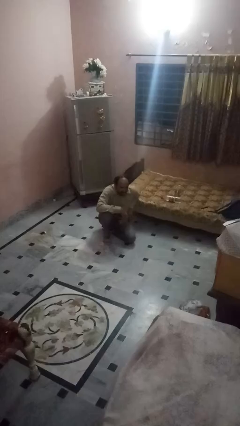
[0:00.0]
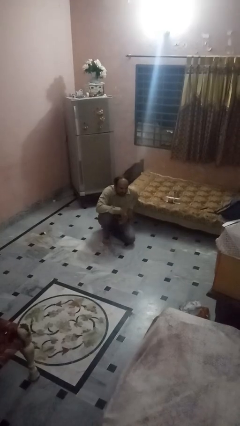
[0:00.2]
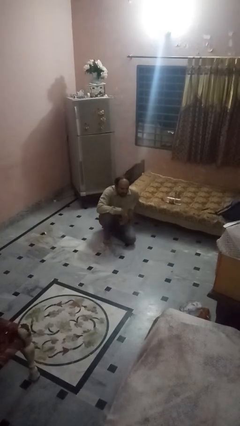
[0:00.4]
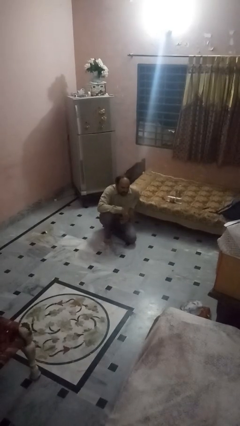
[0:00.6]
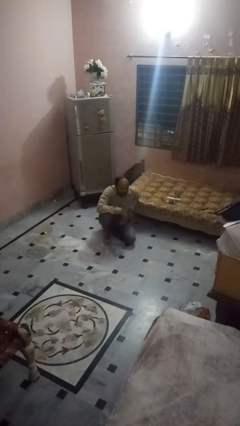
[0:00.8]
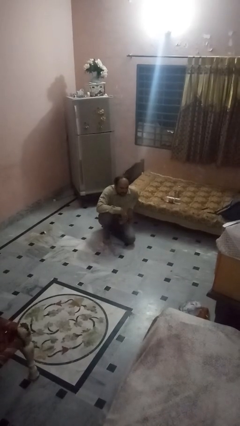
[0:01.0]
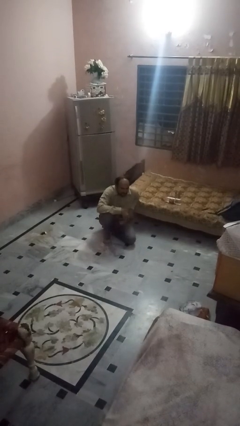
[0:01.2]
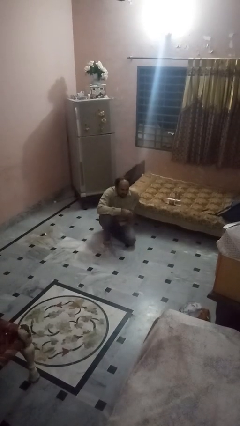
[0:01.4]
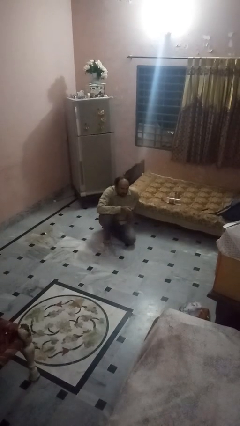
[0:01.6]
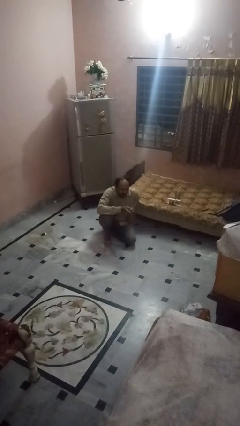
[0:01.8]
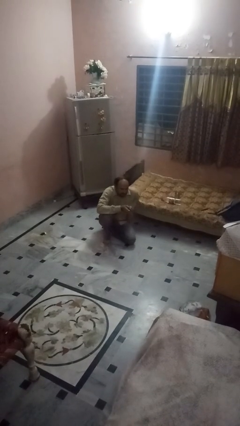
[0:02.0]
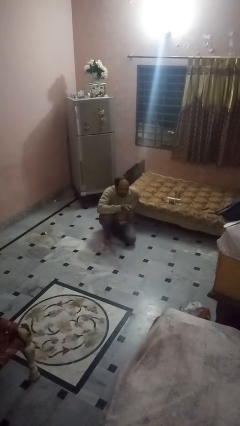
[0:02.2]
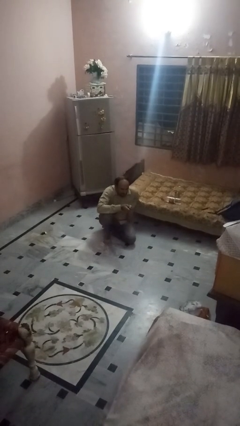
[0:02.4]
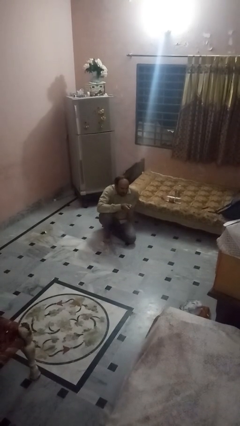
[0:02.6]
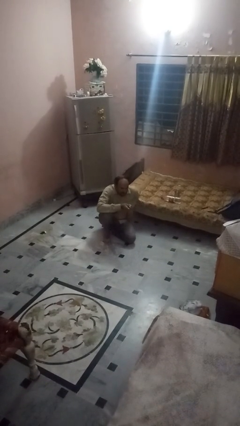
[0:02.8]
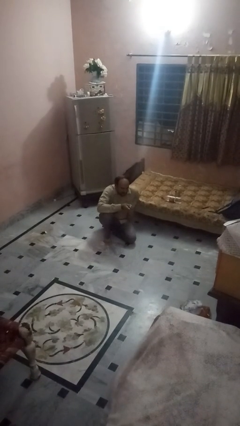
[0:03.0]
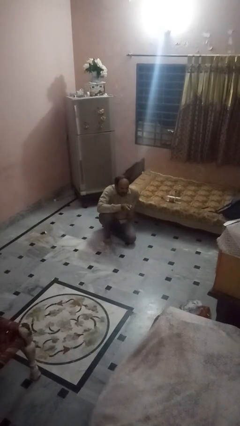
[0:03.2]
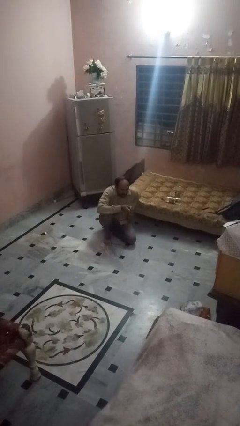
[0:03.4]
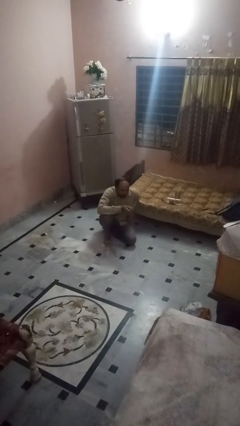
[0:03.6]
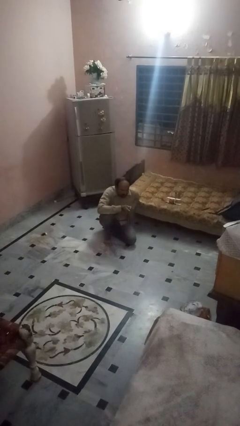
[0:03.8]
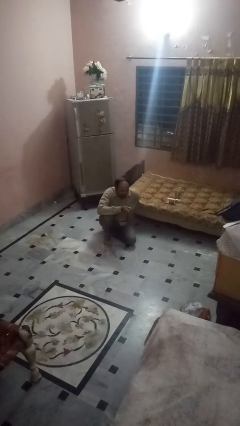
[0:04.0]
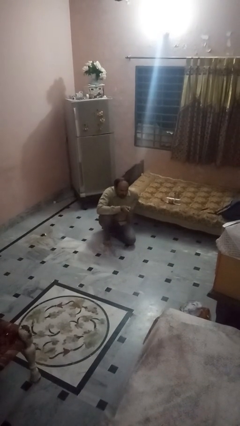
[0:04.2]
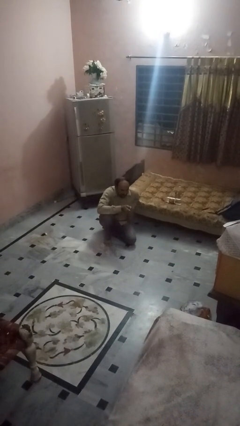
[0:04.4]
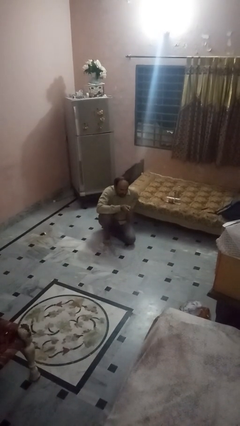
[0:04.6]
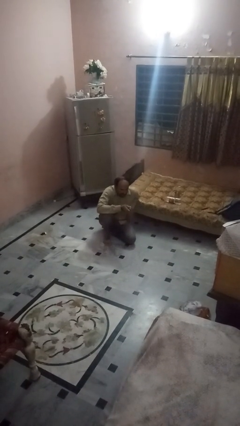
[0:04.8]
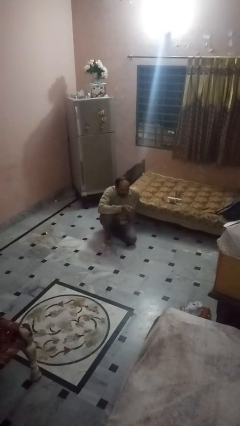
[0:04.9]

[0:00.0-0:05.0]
person uses television remote

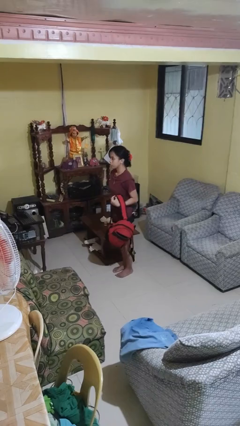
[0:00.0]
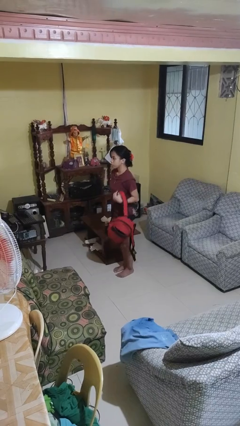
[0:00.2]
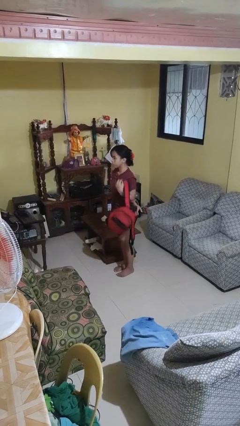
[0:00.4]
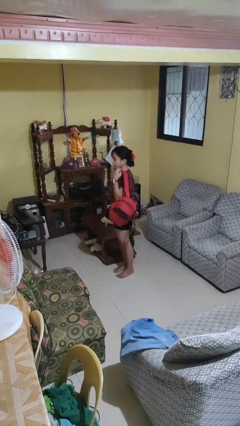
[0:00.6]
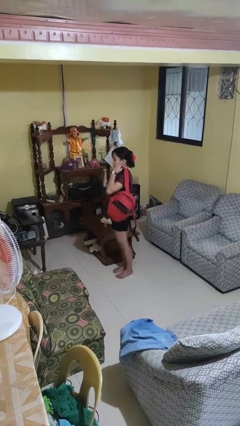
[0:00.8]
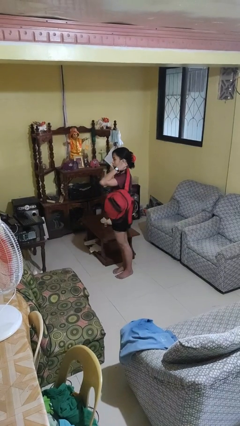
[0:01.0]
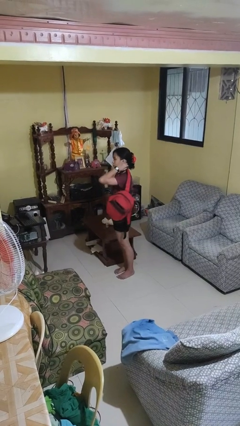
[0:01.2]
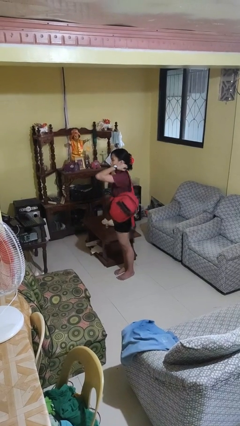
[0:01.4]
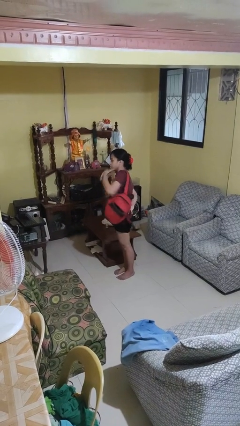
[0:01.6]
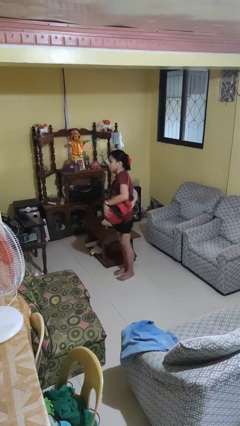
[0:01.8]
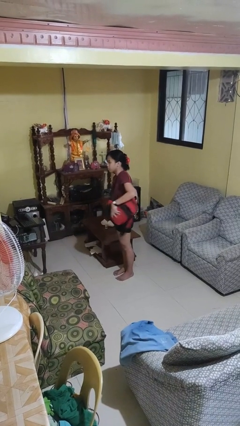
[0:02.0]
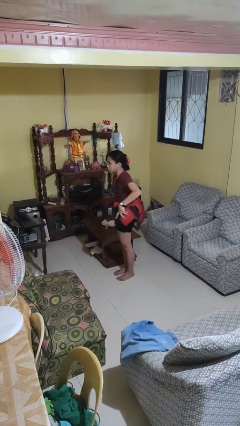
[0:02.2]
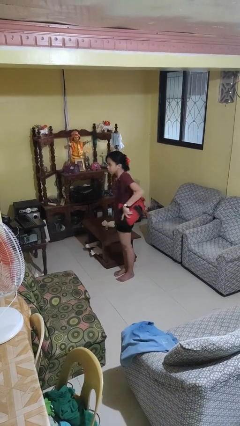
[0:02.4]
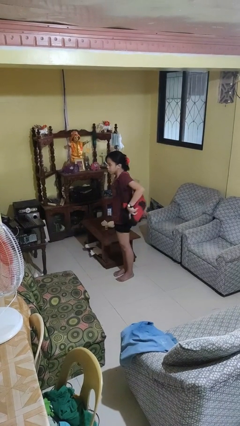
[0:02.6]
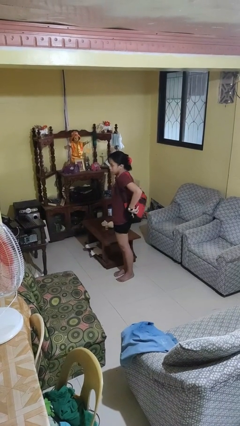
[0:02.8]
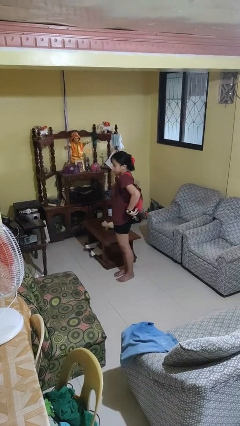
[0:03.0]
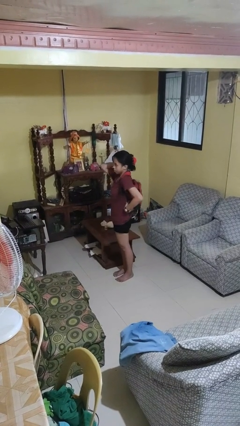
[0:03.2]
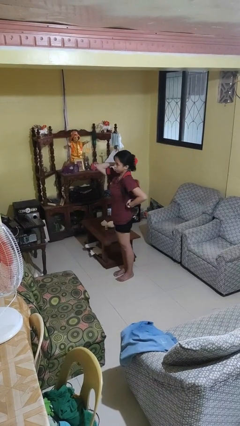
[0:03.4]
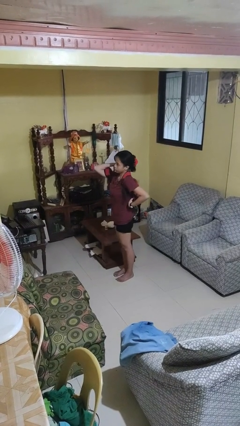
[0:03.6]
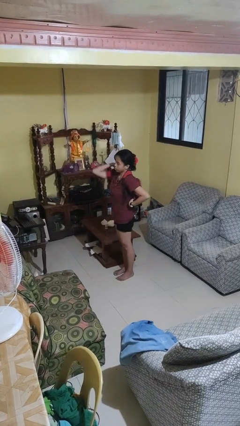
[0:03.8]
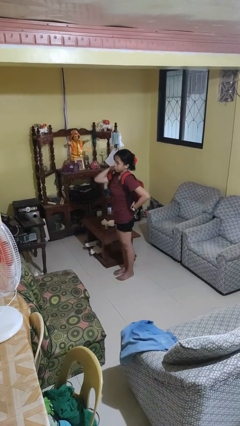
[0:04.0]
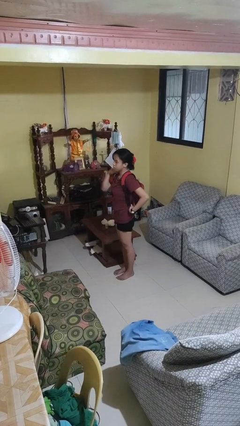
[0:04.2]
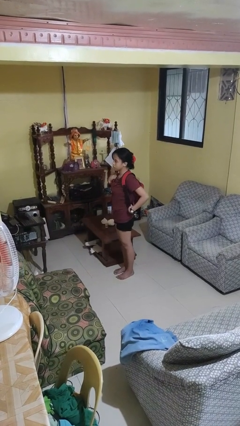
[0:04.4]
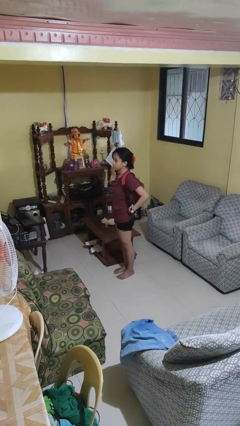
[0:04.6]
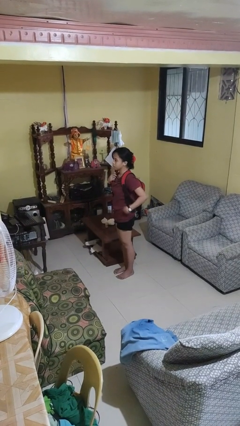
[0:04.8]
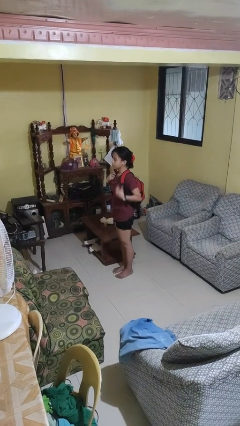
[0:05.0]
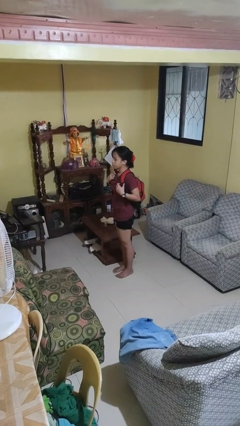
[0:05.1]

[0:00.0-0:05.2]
person puts on backpack

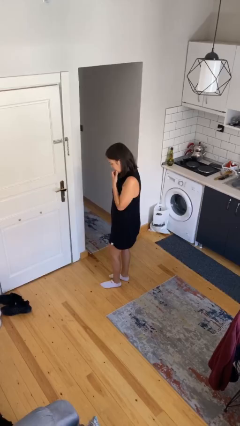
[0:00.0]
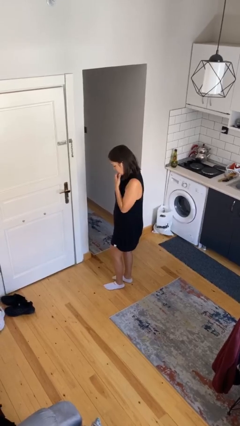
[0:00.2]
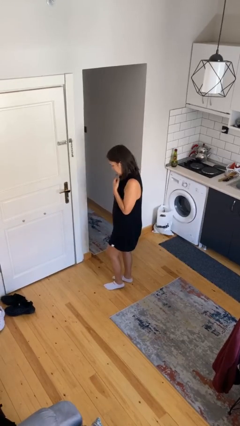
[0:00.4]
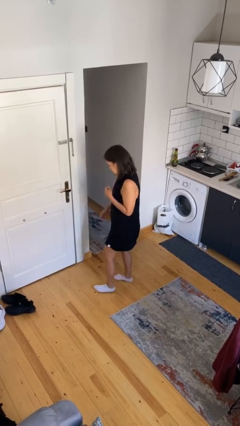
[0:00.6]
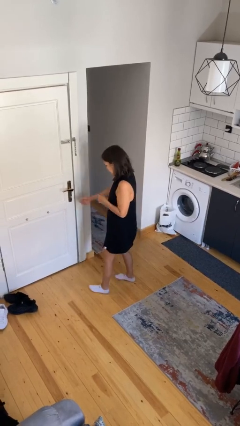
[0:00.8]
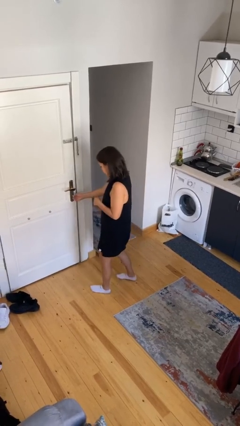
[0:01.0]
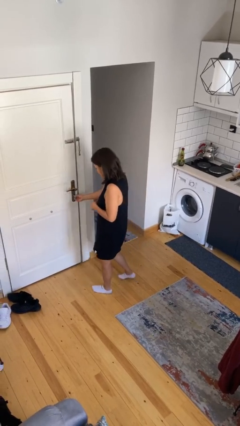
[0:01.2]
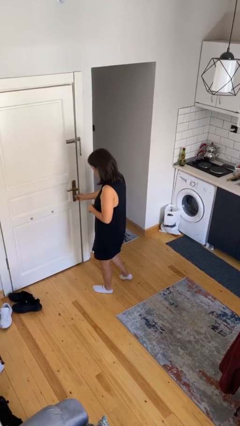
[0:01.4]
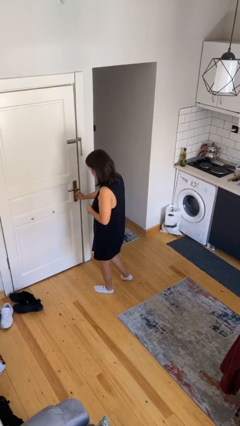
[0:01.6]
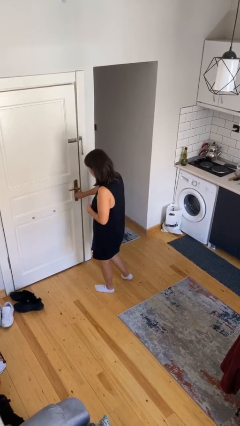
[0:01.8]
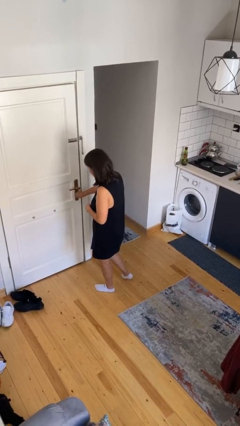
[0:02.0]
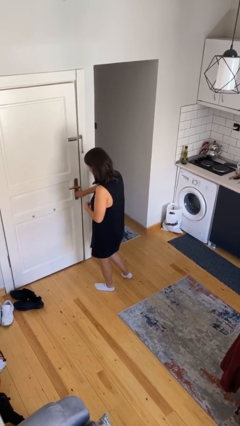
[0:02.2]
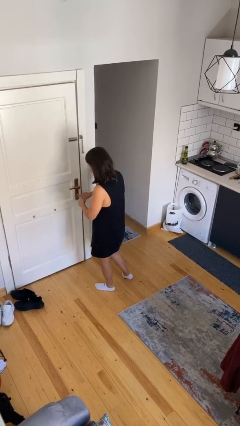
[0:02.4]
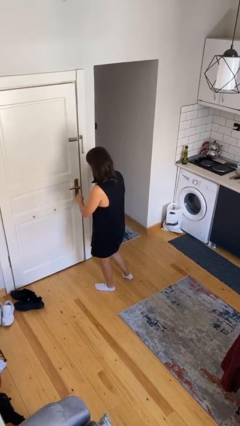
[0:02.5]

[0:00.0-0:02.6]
person unlocks door with keys

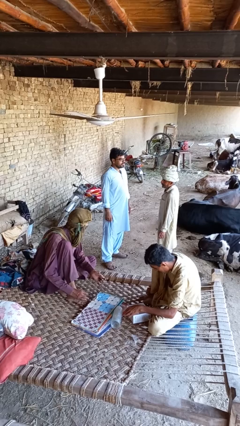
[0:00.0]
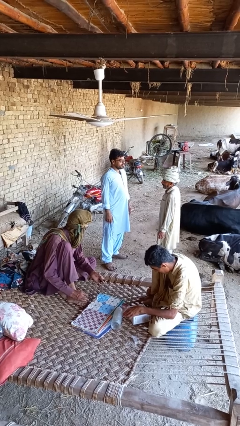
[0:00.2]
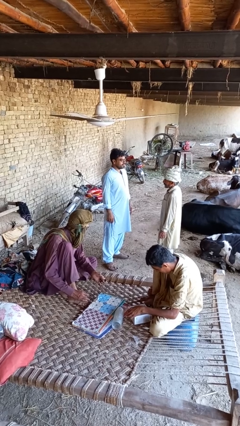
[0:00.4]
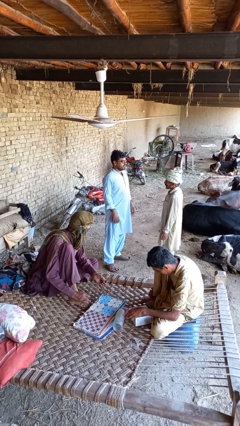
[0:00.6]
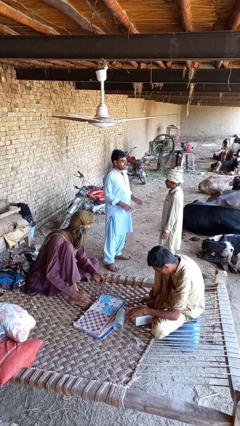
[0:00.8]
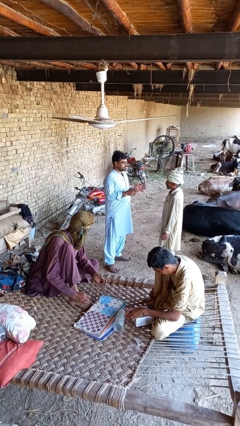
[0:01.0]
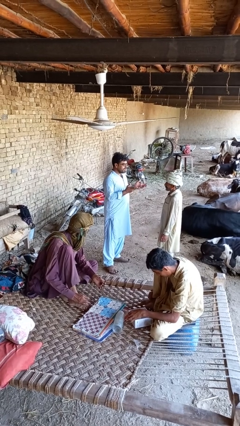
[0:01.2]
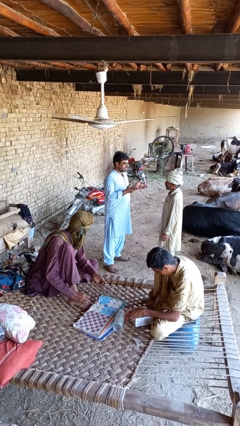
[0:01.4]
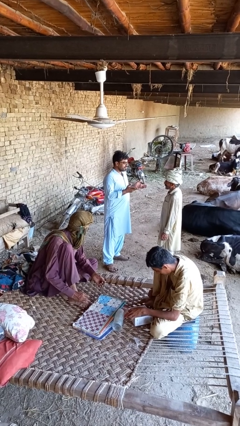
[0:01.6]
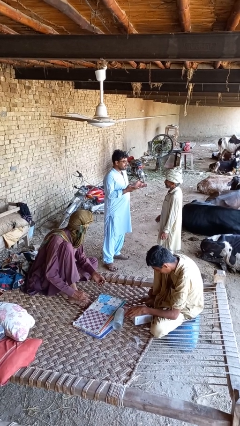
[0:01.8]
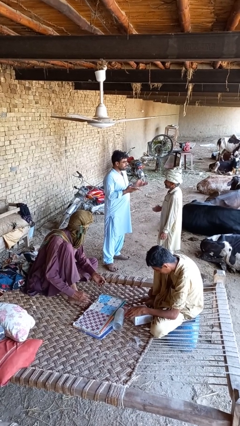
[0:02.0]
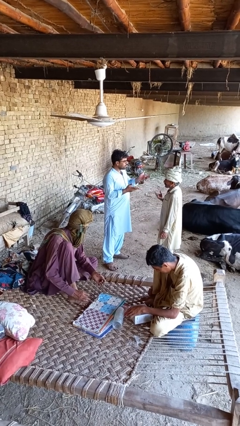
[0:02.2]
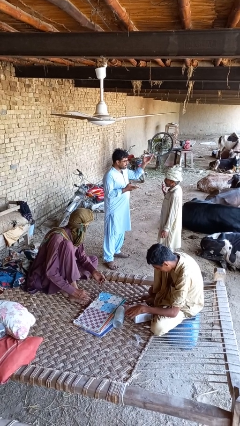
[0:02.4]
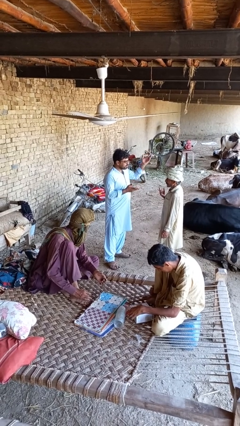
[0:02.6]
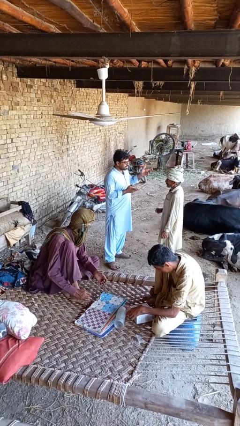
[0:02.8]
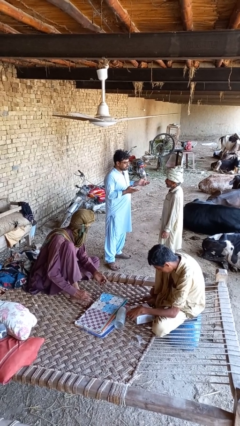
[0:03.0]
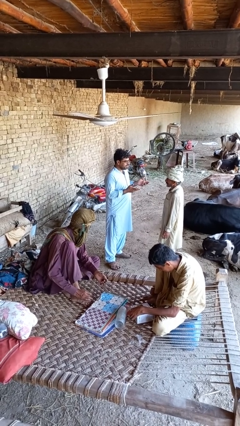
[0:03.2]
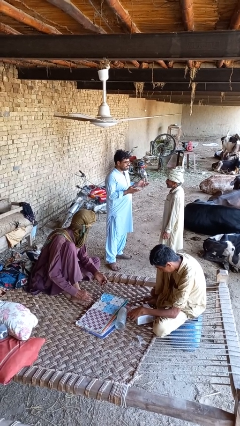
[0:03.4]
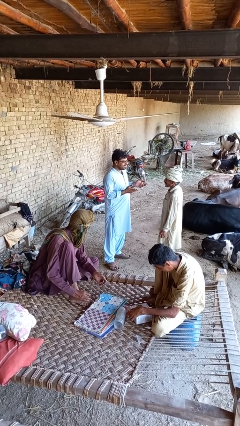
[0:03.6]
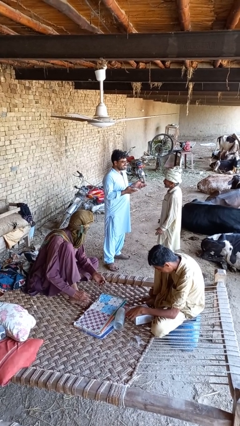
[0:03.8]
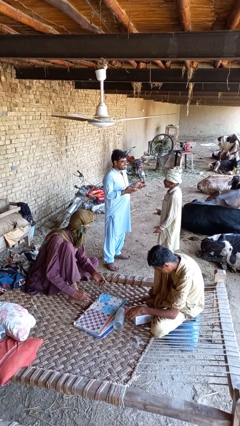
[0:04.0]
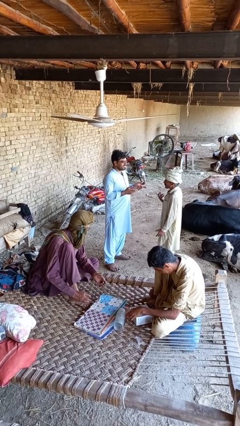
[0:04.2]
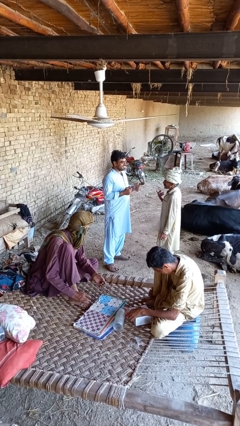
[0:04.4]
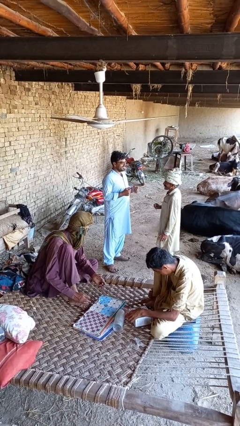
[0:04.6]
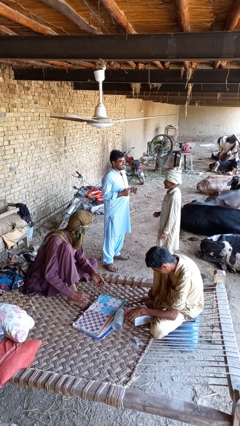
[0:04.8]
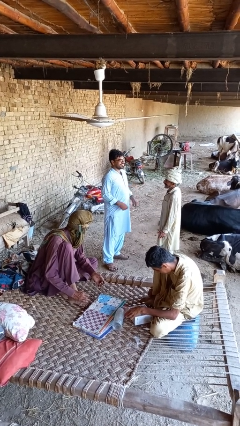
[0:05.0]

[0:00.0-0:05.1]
person talks to person
